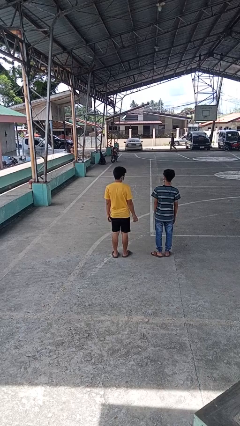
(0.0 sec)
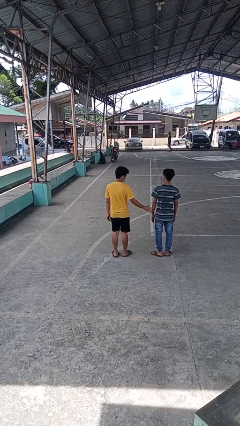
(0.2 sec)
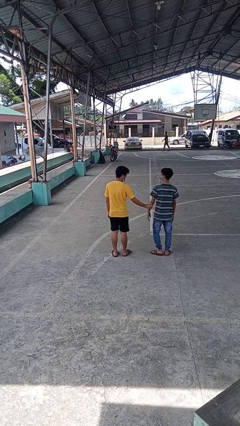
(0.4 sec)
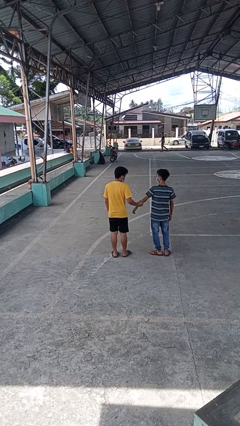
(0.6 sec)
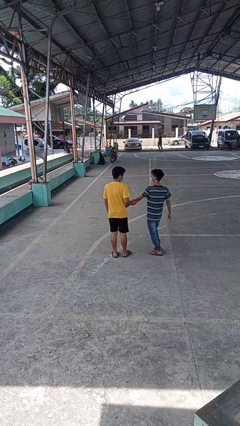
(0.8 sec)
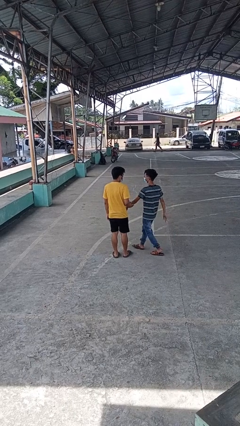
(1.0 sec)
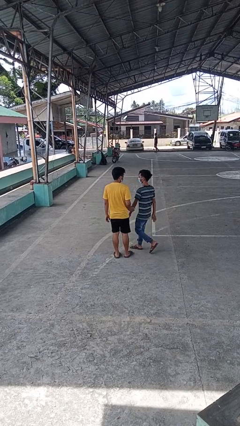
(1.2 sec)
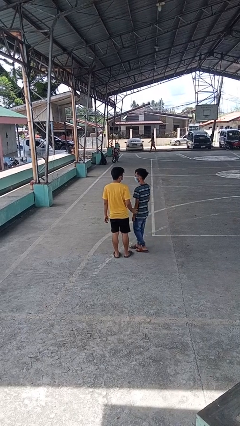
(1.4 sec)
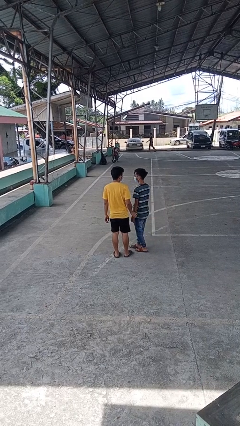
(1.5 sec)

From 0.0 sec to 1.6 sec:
person grabs person by forearm

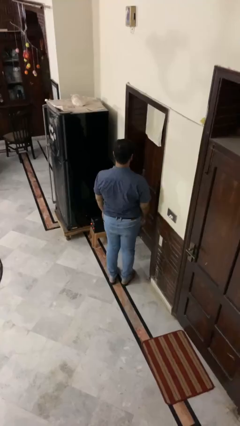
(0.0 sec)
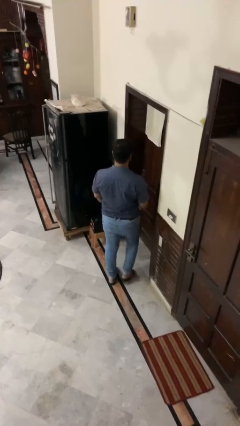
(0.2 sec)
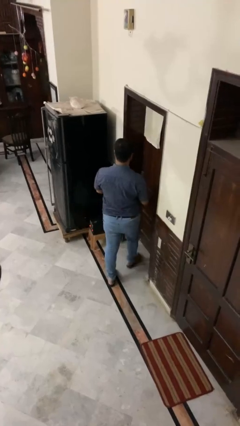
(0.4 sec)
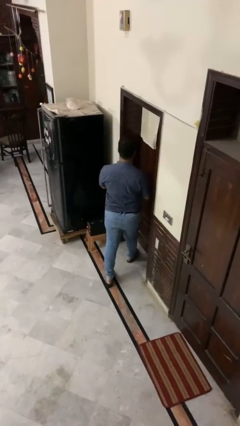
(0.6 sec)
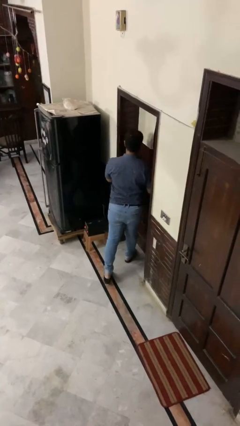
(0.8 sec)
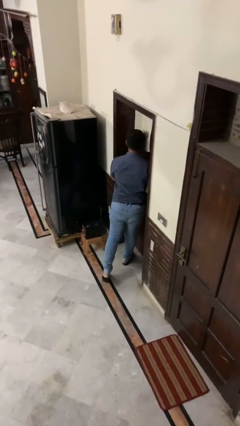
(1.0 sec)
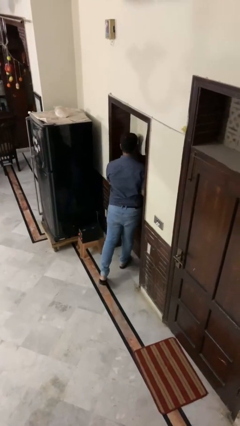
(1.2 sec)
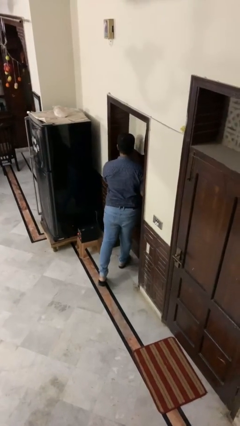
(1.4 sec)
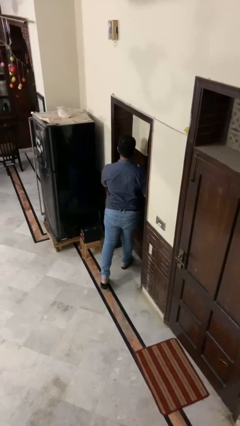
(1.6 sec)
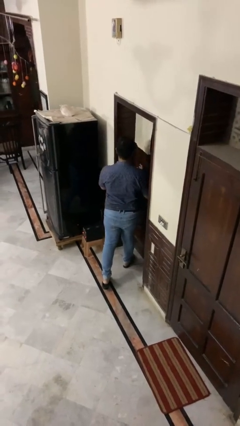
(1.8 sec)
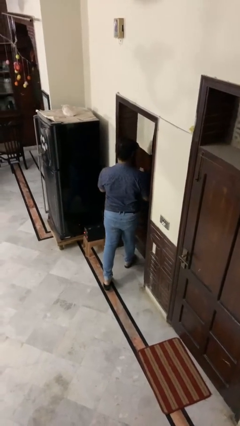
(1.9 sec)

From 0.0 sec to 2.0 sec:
person bumps into wall

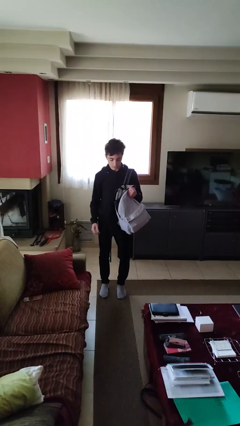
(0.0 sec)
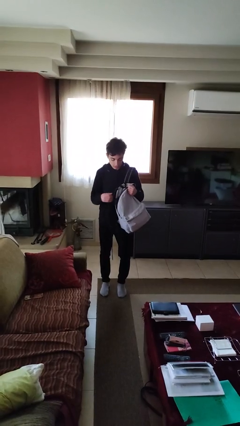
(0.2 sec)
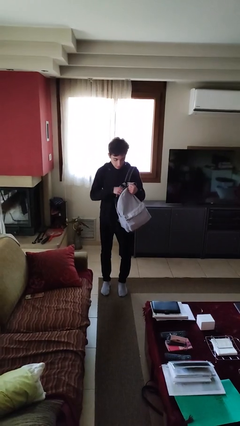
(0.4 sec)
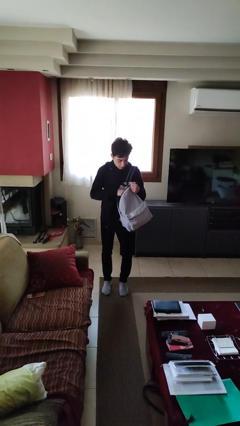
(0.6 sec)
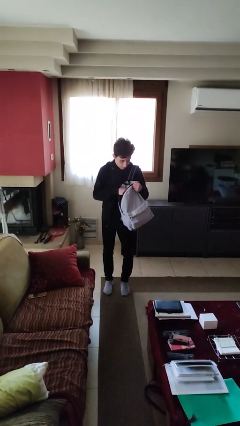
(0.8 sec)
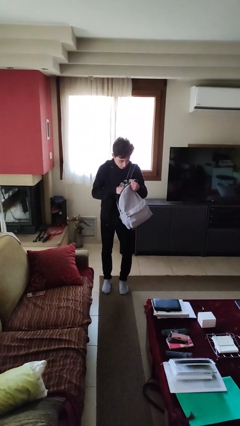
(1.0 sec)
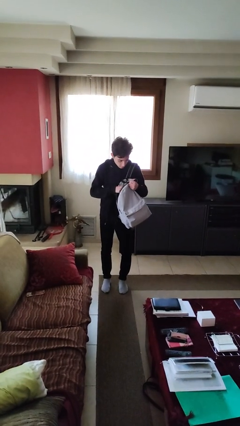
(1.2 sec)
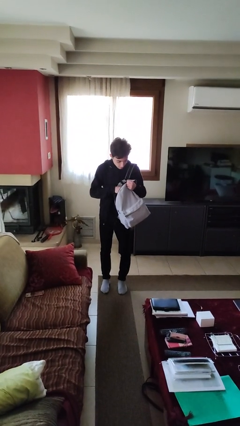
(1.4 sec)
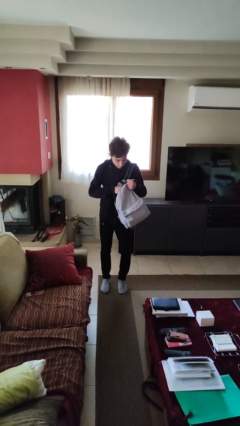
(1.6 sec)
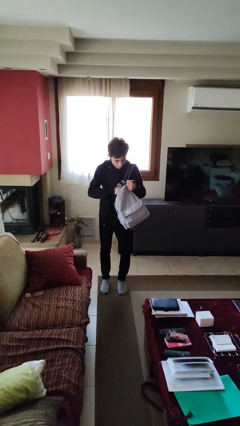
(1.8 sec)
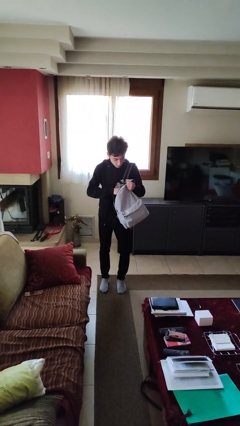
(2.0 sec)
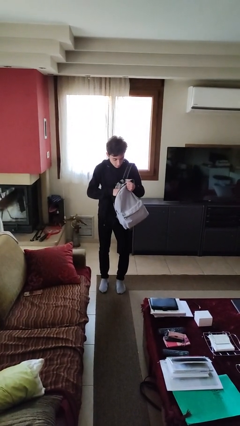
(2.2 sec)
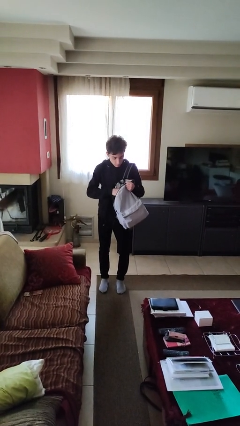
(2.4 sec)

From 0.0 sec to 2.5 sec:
person searches in backpack

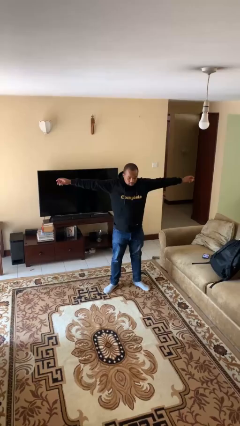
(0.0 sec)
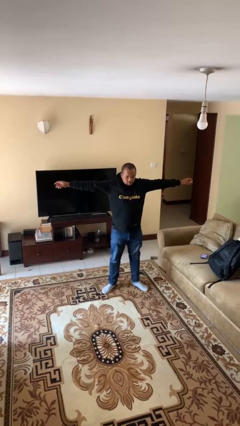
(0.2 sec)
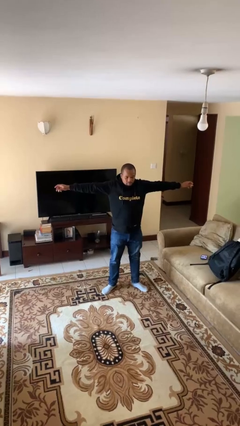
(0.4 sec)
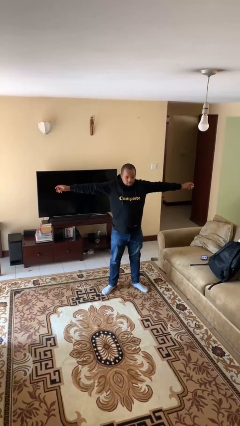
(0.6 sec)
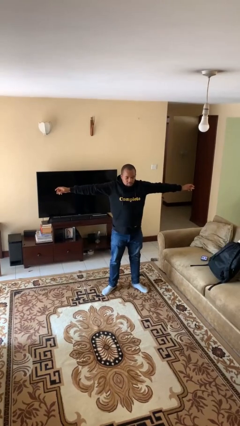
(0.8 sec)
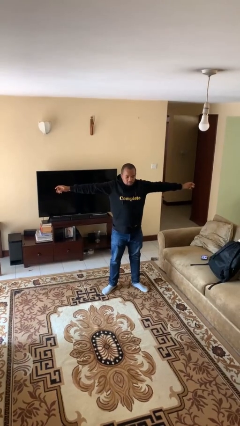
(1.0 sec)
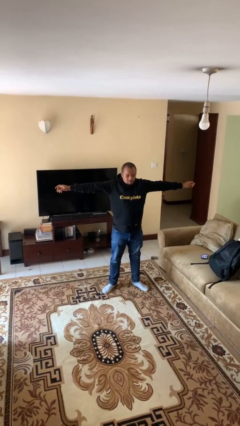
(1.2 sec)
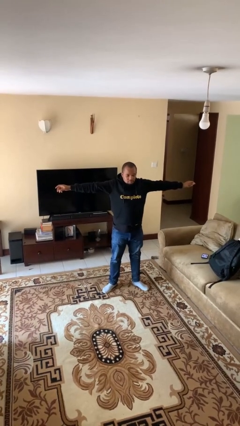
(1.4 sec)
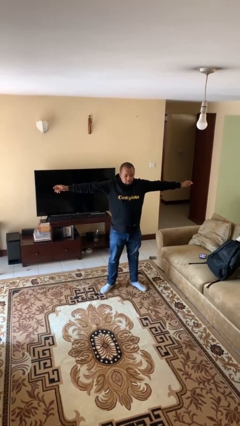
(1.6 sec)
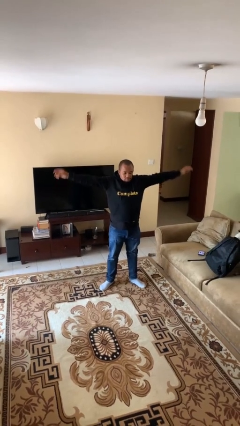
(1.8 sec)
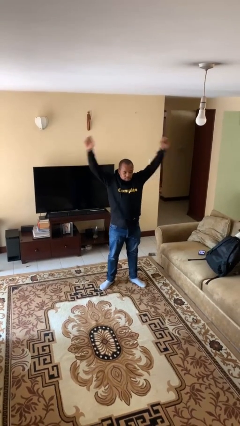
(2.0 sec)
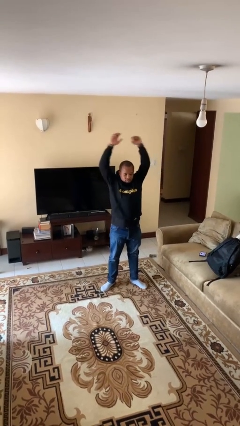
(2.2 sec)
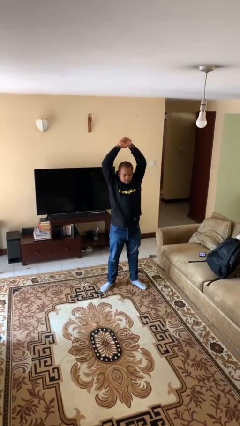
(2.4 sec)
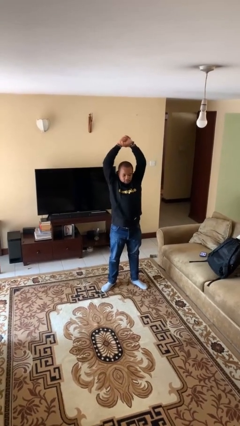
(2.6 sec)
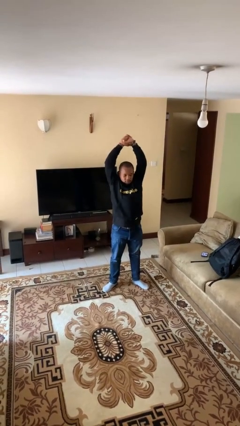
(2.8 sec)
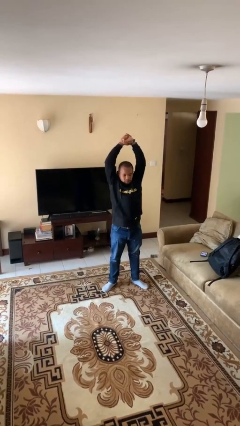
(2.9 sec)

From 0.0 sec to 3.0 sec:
person stretches arms to side

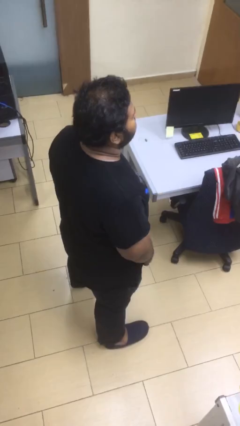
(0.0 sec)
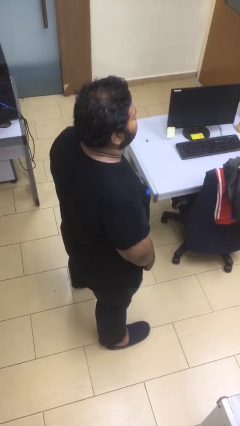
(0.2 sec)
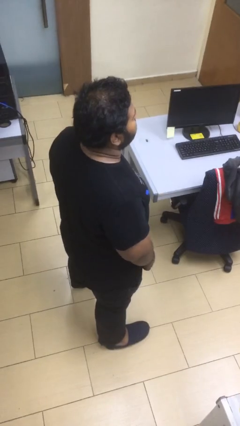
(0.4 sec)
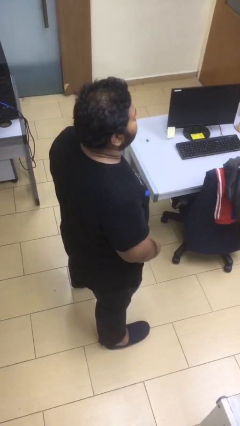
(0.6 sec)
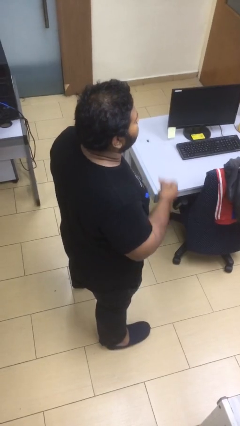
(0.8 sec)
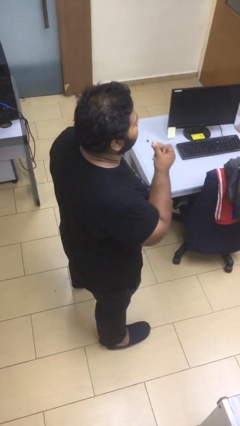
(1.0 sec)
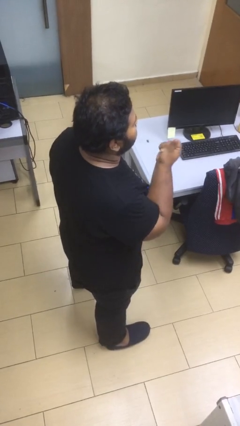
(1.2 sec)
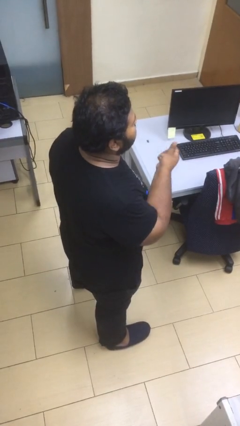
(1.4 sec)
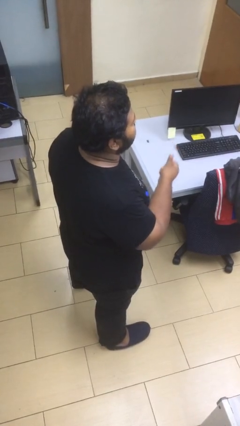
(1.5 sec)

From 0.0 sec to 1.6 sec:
person snaps fingers

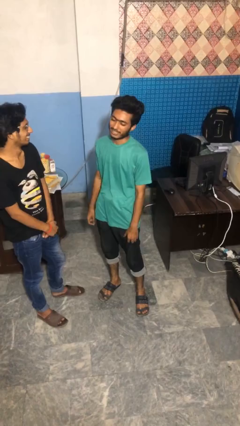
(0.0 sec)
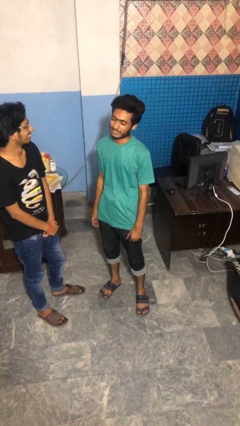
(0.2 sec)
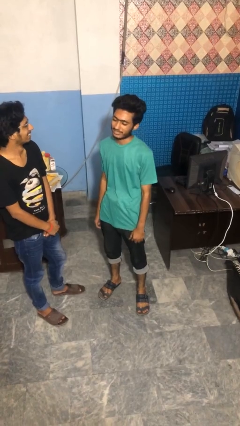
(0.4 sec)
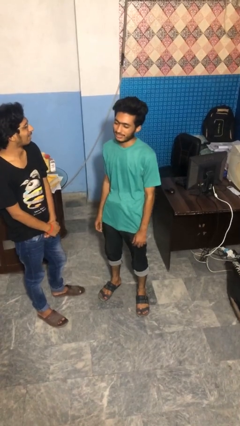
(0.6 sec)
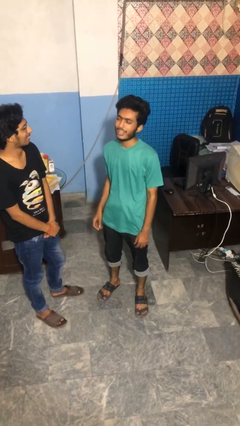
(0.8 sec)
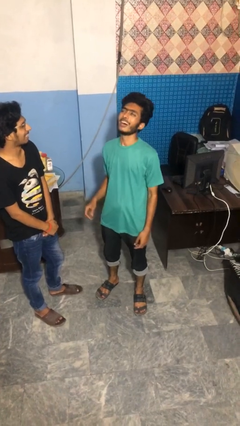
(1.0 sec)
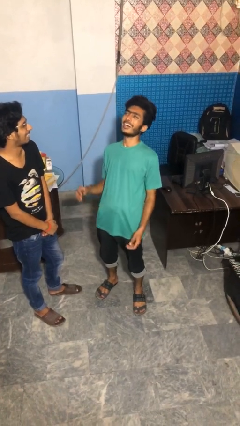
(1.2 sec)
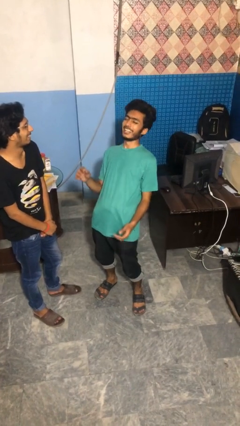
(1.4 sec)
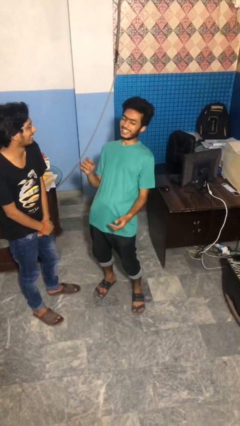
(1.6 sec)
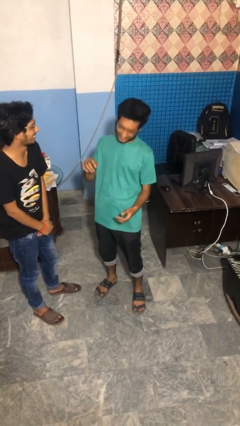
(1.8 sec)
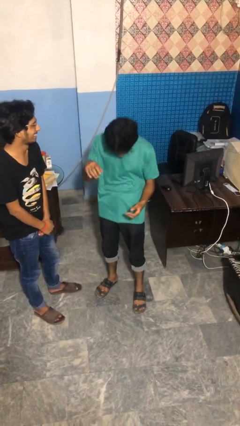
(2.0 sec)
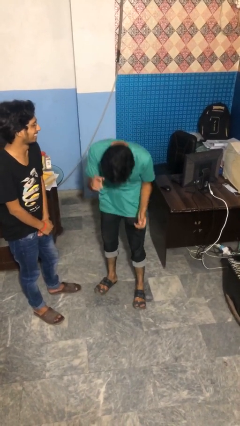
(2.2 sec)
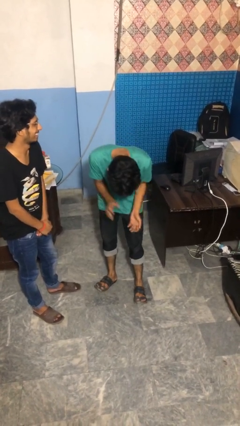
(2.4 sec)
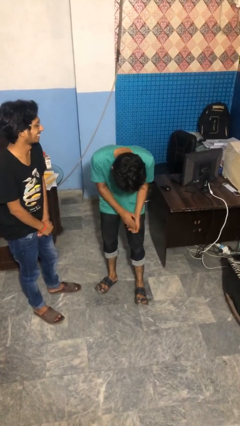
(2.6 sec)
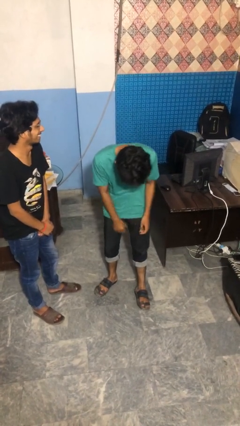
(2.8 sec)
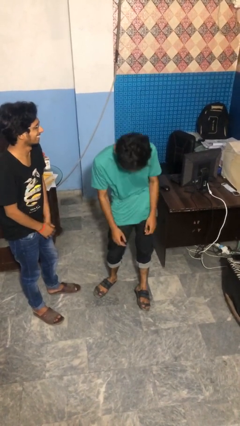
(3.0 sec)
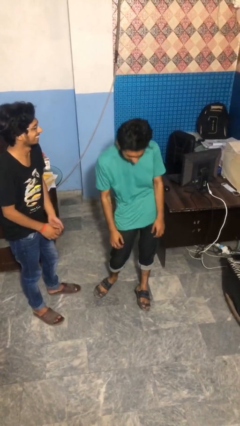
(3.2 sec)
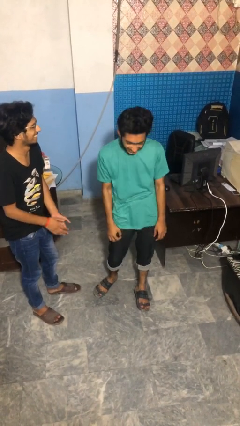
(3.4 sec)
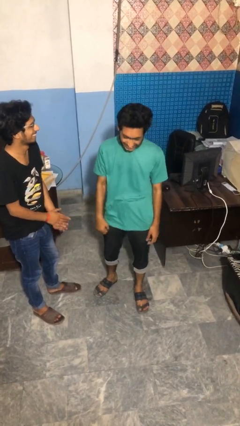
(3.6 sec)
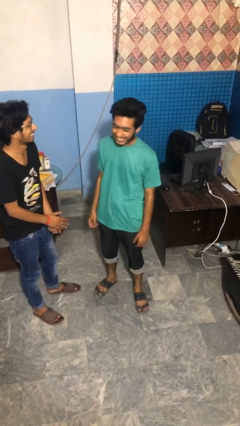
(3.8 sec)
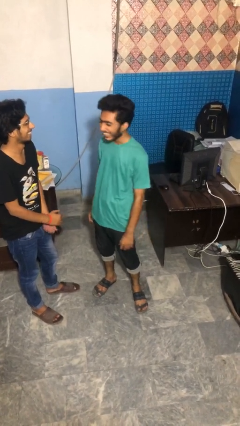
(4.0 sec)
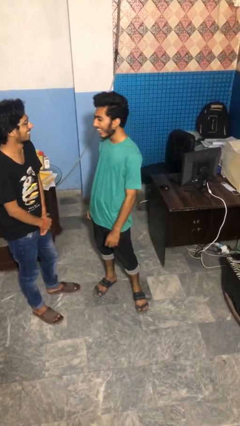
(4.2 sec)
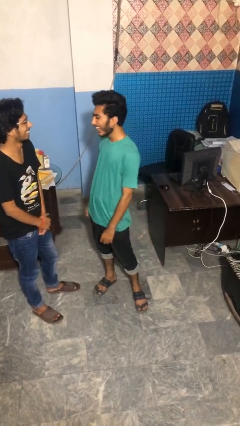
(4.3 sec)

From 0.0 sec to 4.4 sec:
person laughs with person

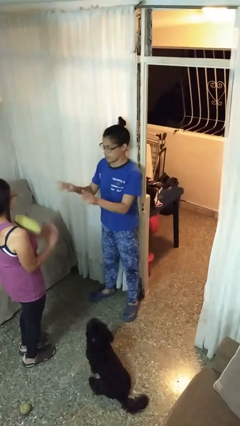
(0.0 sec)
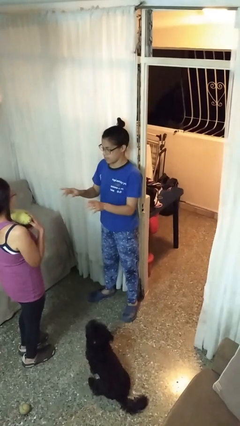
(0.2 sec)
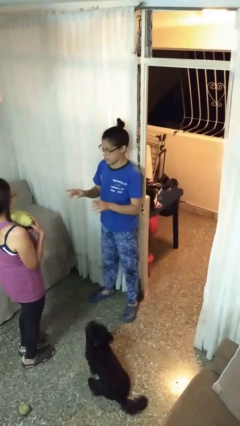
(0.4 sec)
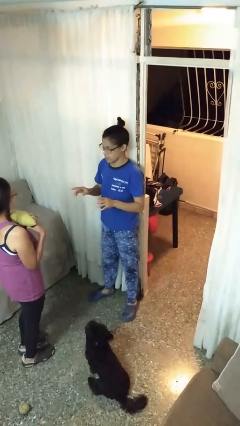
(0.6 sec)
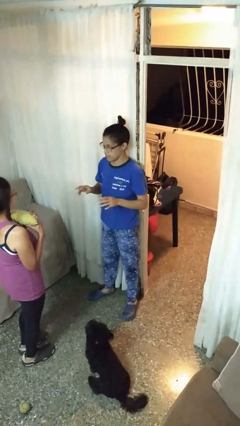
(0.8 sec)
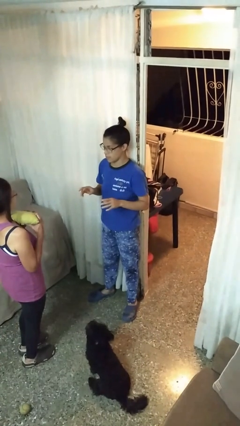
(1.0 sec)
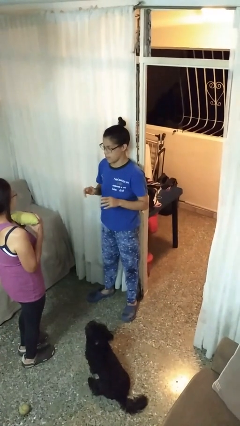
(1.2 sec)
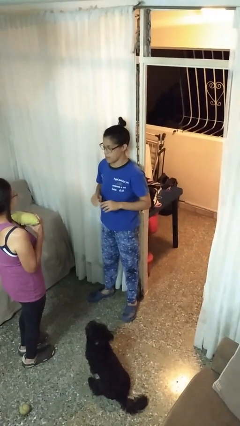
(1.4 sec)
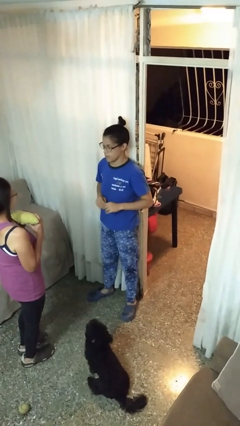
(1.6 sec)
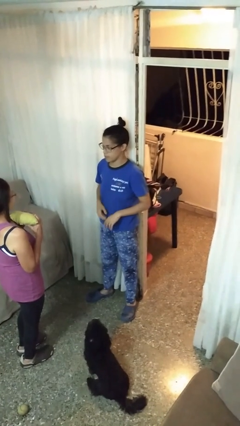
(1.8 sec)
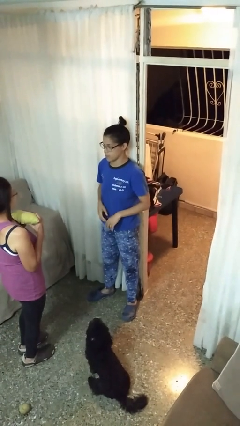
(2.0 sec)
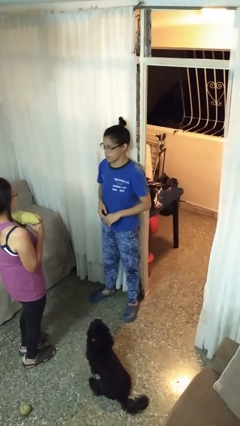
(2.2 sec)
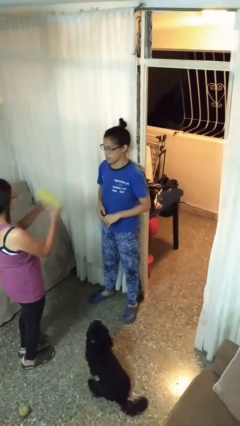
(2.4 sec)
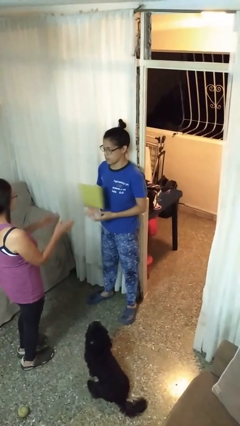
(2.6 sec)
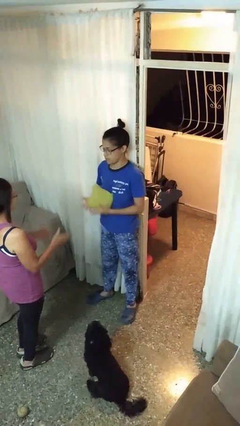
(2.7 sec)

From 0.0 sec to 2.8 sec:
person throws object to person
